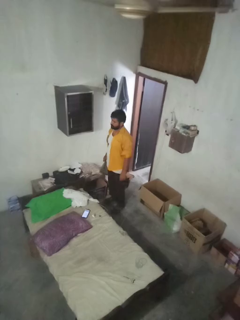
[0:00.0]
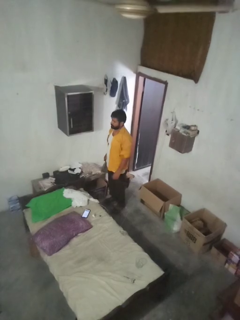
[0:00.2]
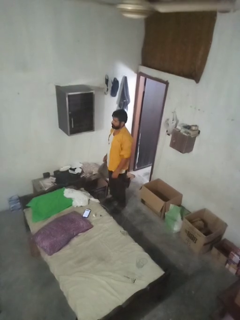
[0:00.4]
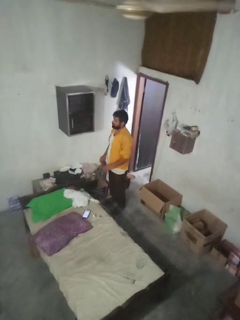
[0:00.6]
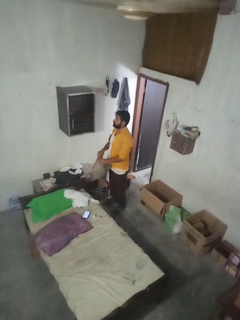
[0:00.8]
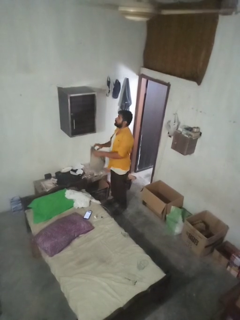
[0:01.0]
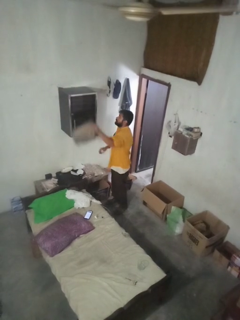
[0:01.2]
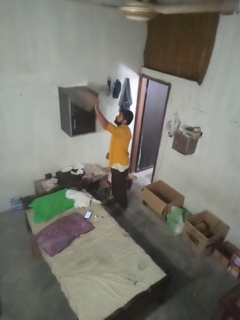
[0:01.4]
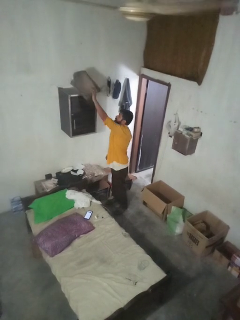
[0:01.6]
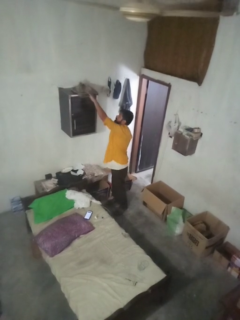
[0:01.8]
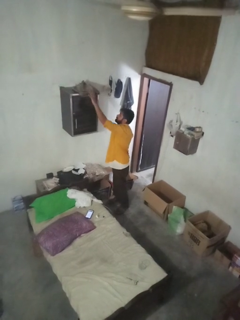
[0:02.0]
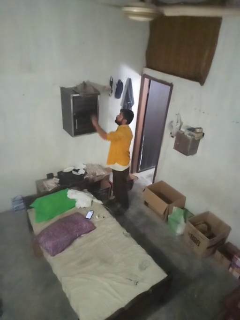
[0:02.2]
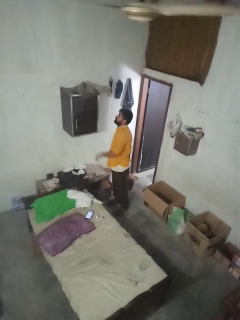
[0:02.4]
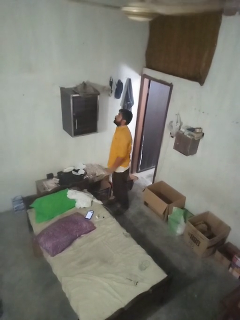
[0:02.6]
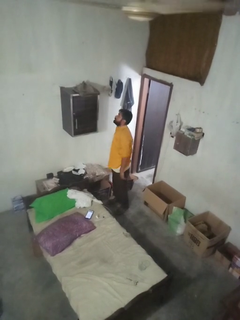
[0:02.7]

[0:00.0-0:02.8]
person puts down object on shelf

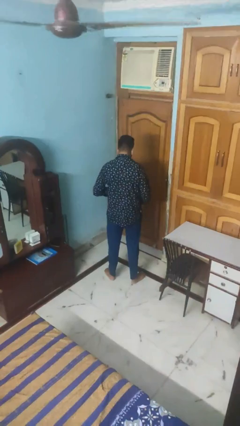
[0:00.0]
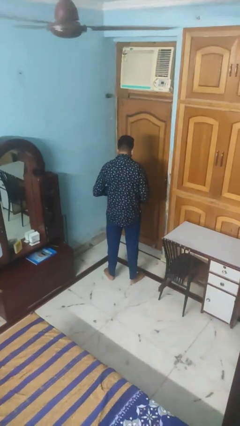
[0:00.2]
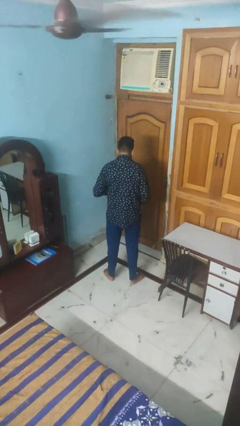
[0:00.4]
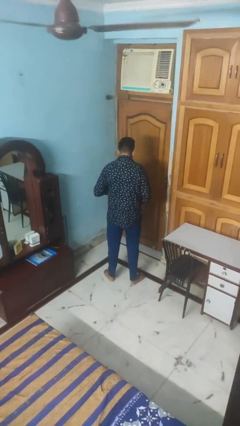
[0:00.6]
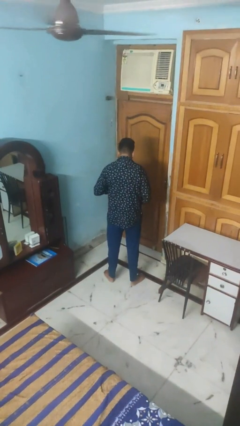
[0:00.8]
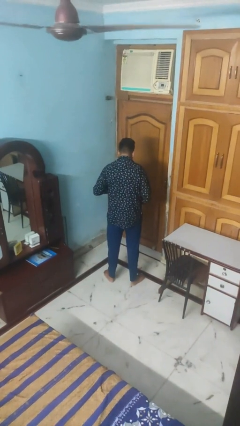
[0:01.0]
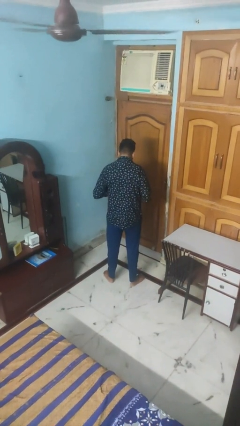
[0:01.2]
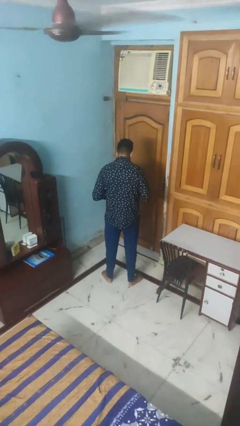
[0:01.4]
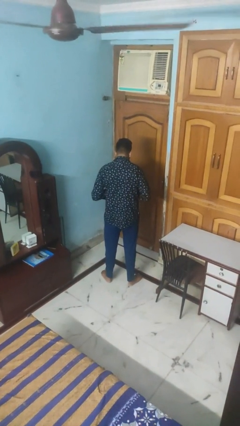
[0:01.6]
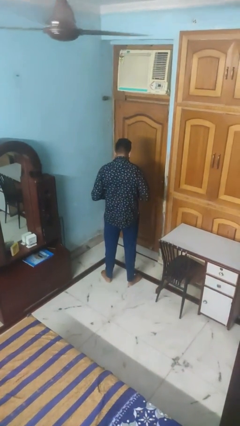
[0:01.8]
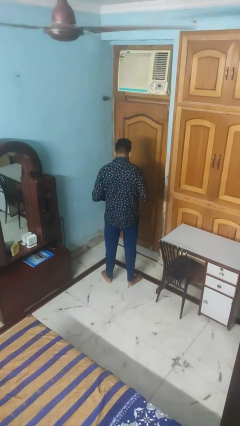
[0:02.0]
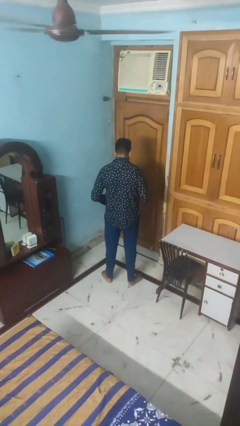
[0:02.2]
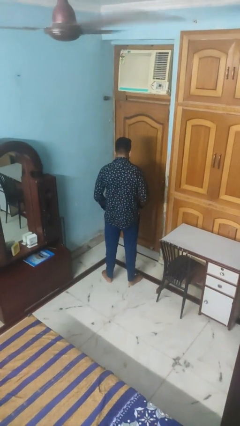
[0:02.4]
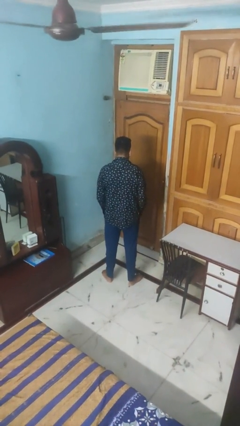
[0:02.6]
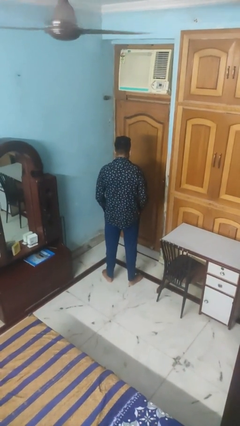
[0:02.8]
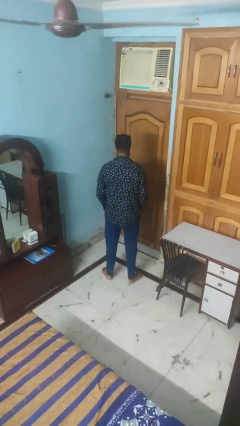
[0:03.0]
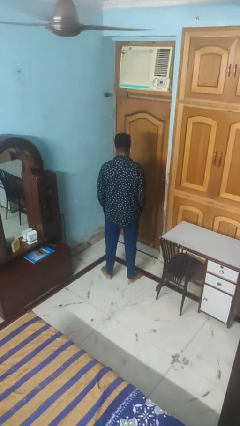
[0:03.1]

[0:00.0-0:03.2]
person unbuttons shirt

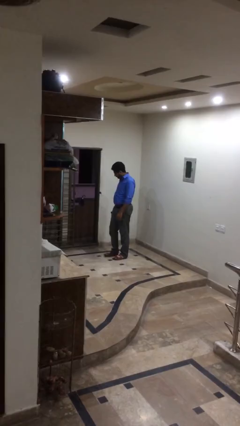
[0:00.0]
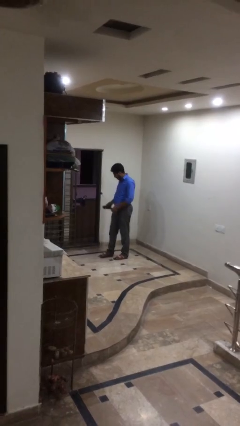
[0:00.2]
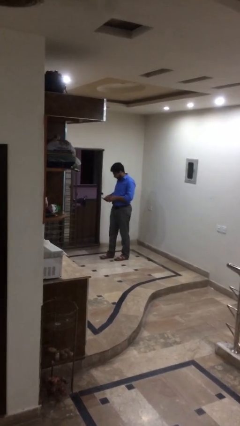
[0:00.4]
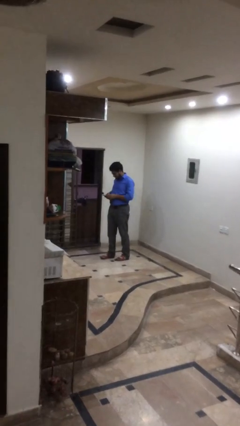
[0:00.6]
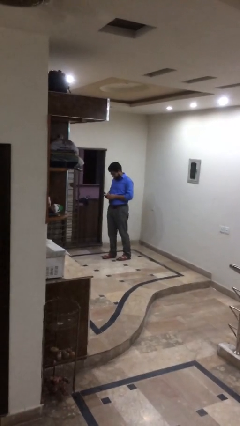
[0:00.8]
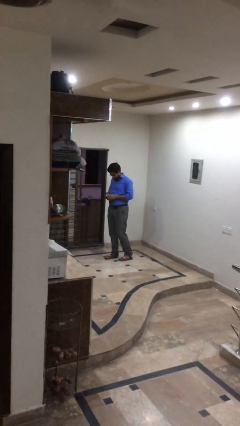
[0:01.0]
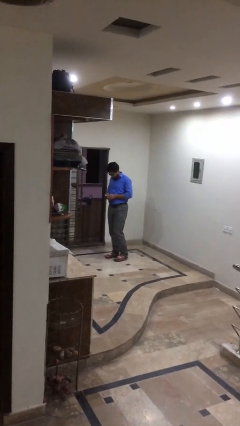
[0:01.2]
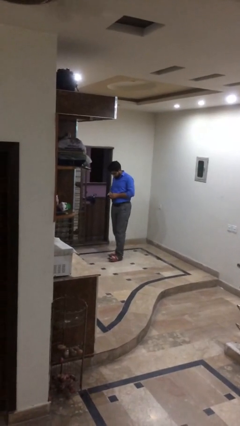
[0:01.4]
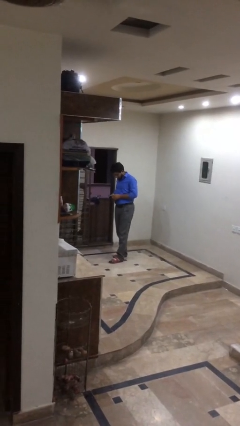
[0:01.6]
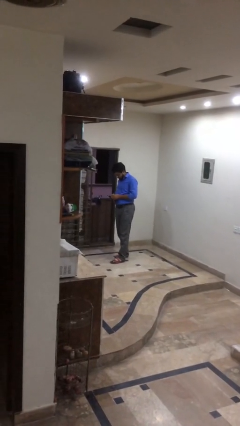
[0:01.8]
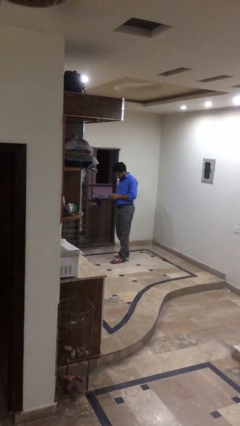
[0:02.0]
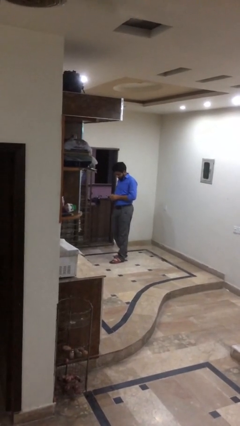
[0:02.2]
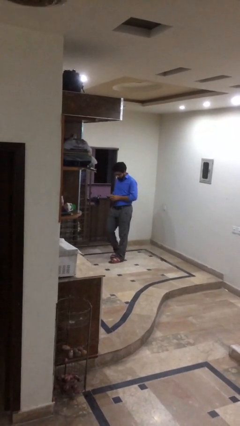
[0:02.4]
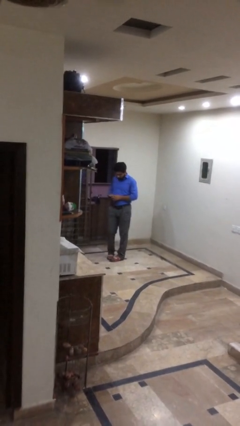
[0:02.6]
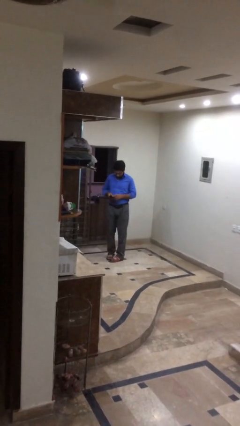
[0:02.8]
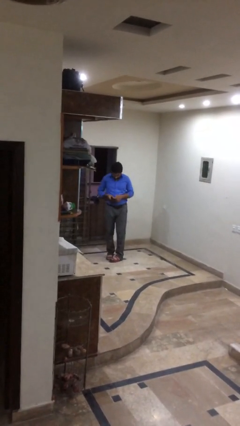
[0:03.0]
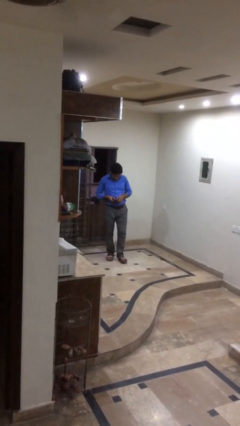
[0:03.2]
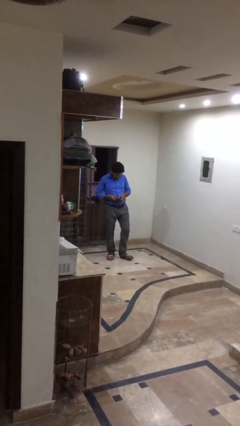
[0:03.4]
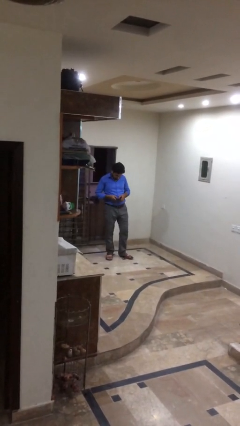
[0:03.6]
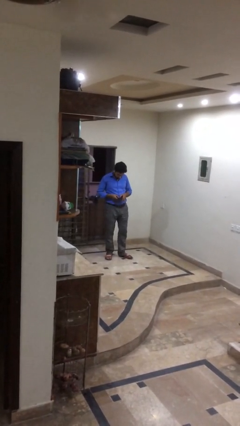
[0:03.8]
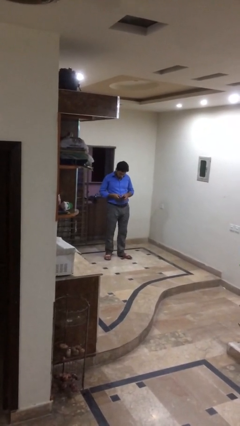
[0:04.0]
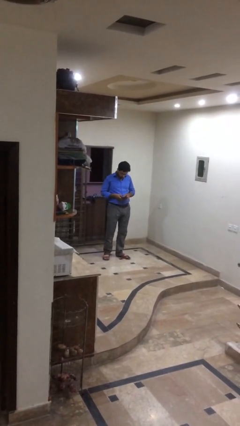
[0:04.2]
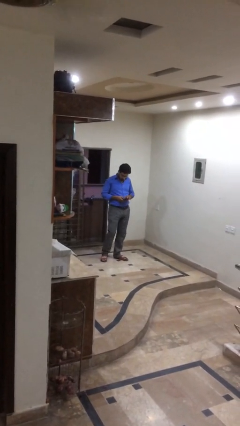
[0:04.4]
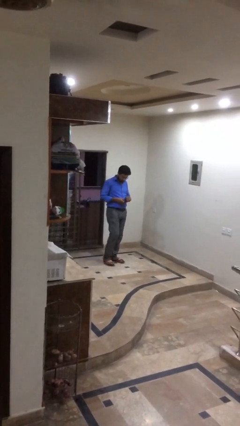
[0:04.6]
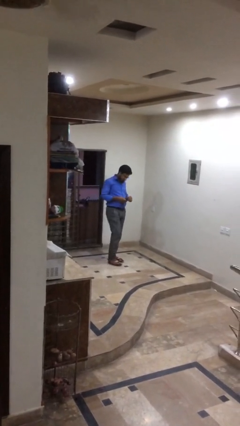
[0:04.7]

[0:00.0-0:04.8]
person texts on phone

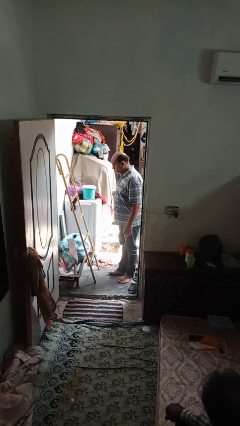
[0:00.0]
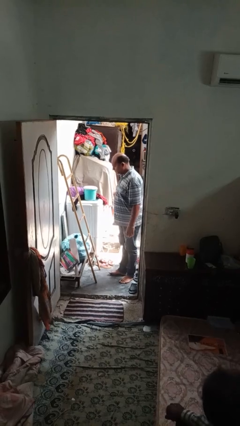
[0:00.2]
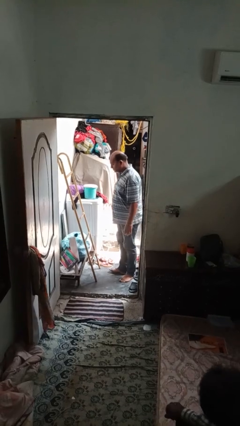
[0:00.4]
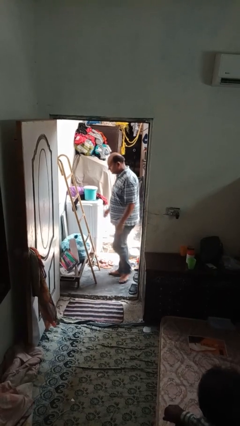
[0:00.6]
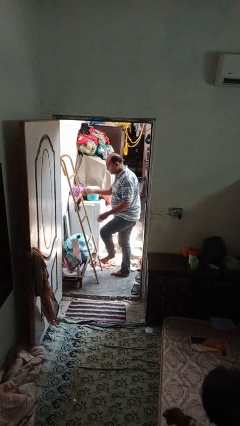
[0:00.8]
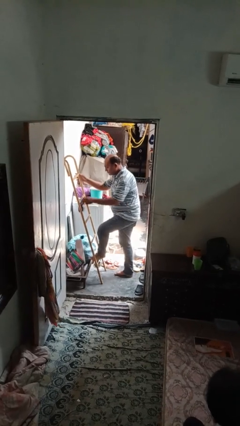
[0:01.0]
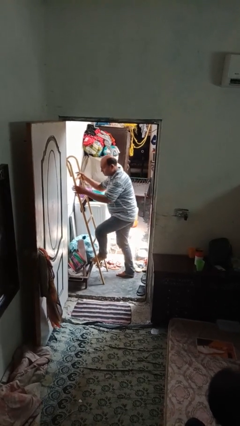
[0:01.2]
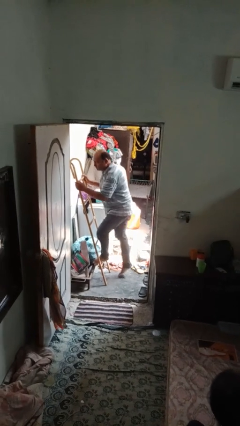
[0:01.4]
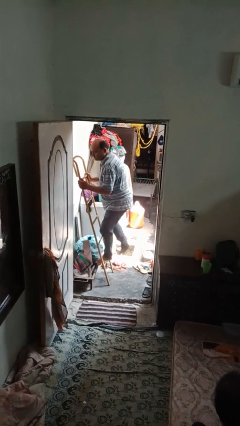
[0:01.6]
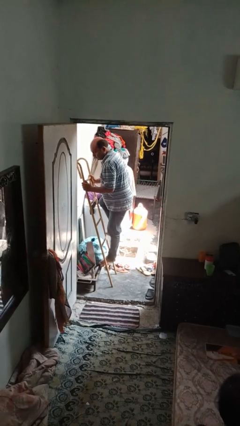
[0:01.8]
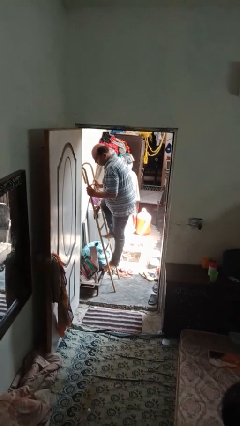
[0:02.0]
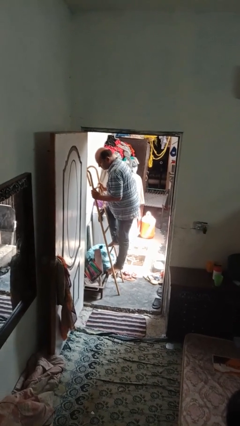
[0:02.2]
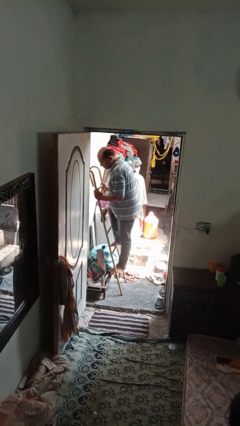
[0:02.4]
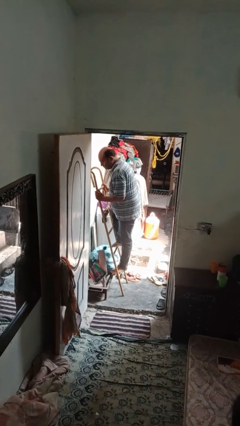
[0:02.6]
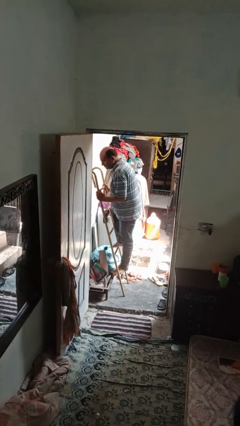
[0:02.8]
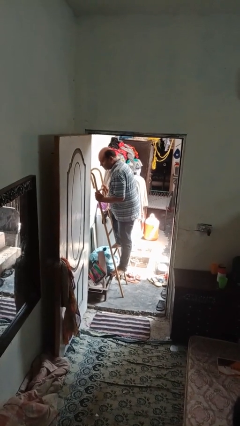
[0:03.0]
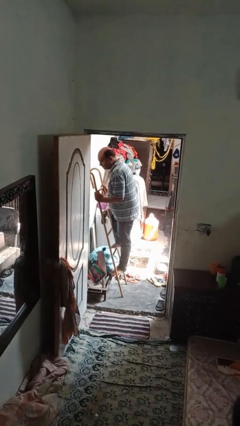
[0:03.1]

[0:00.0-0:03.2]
person climbs up ladder

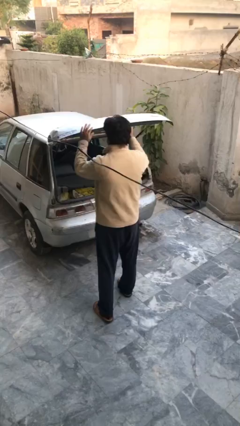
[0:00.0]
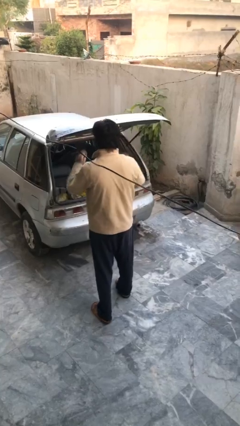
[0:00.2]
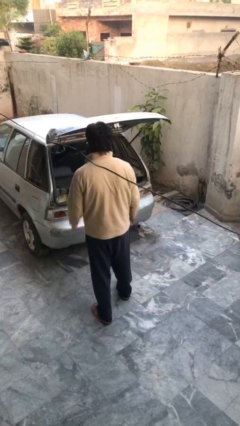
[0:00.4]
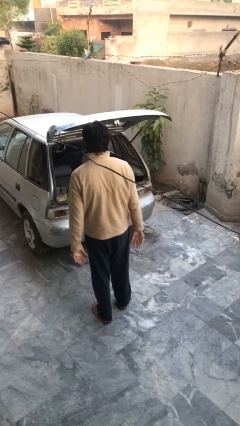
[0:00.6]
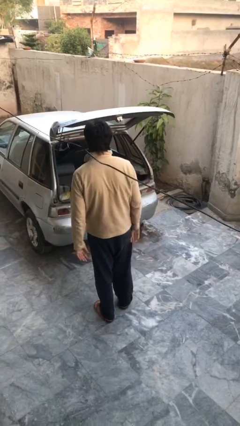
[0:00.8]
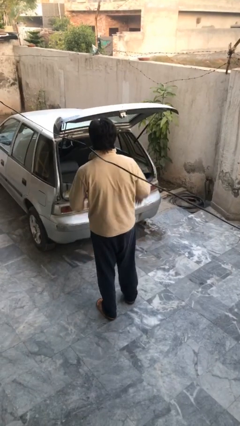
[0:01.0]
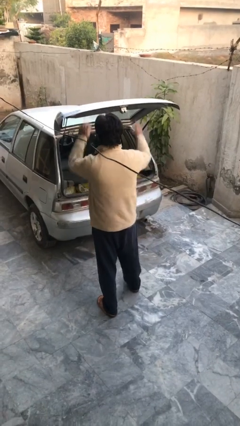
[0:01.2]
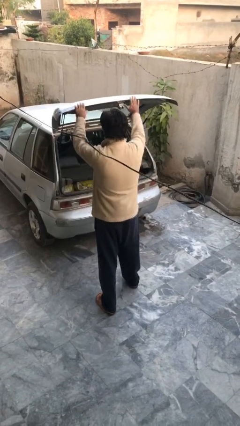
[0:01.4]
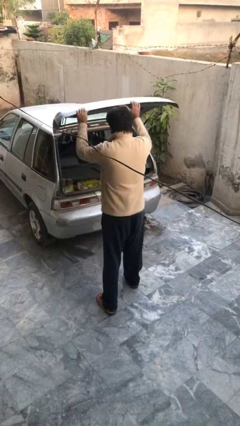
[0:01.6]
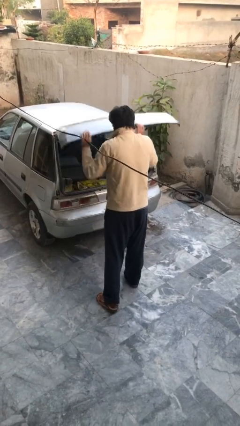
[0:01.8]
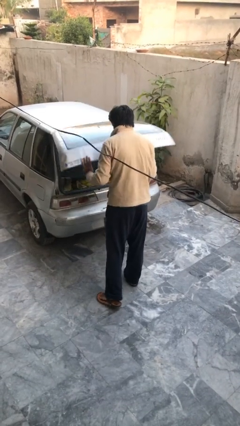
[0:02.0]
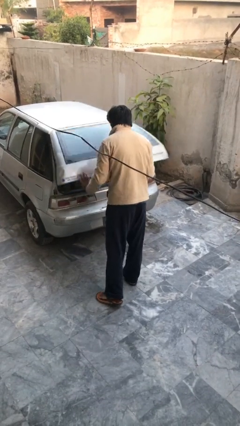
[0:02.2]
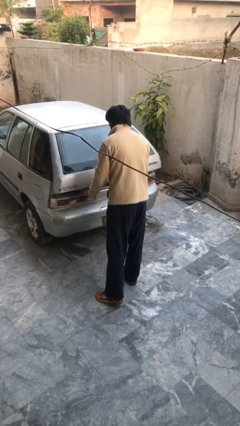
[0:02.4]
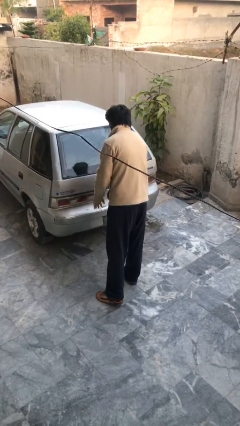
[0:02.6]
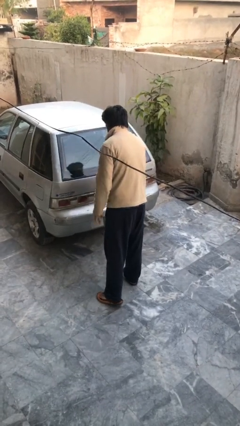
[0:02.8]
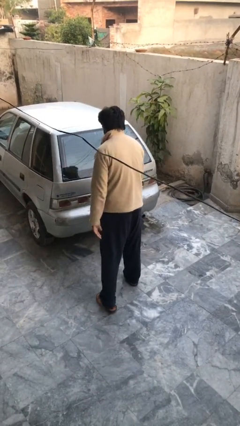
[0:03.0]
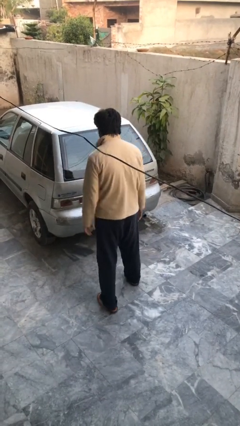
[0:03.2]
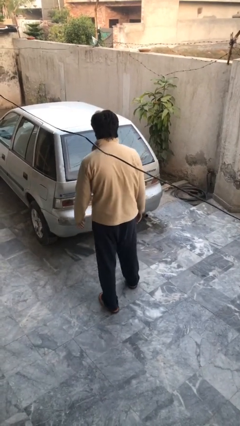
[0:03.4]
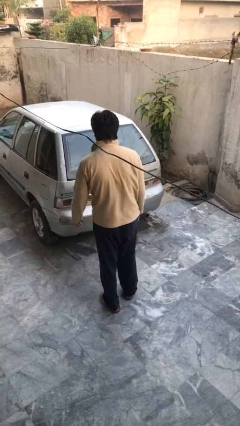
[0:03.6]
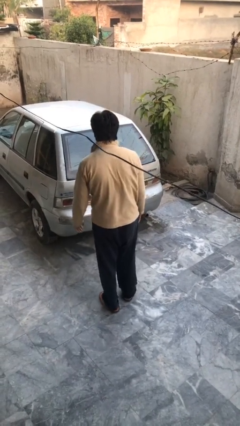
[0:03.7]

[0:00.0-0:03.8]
person closes car trunk

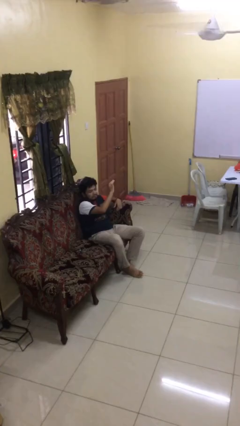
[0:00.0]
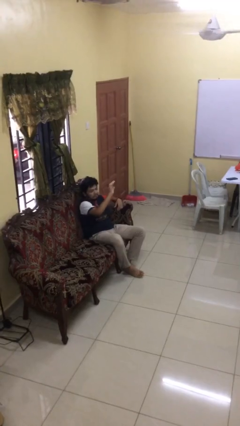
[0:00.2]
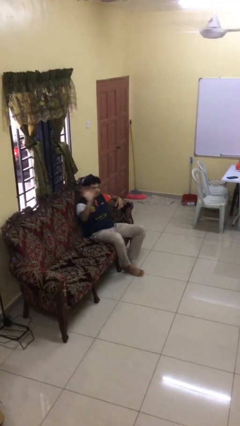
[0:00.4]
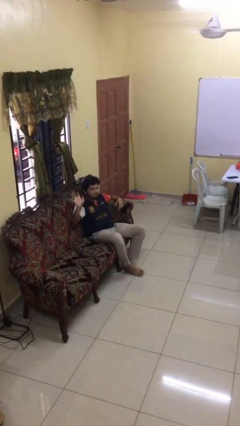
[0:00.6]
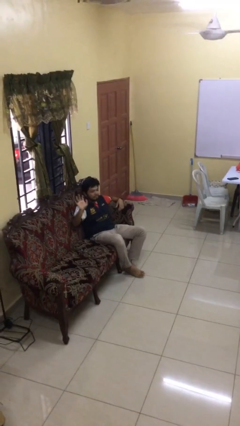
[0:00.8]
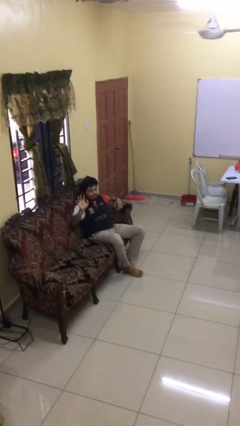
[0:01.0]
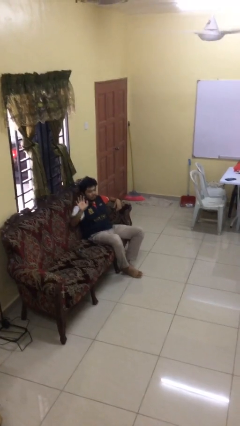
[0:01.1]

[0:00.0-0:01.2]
person gestures swipe right
